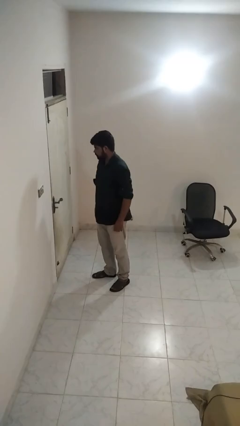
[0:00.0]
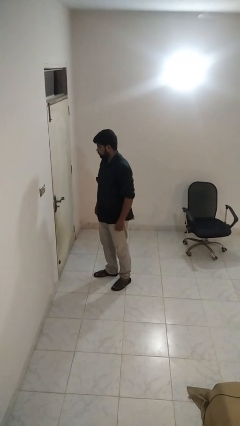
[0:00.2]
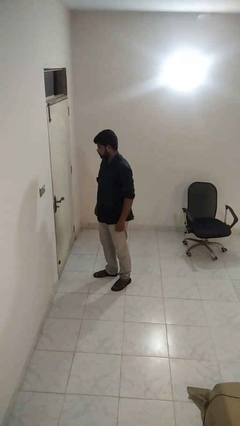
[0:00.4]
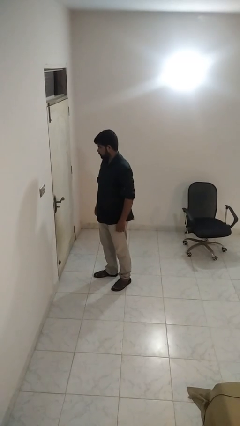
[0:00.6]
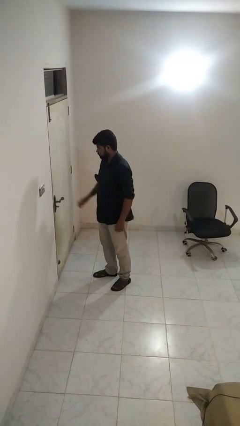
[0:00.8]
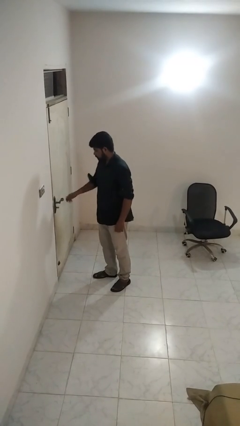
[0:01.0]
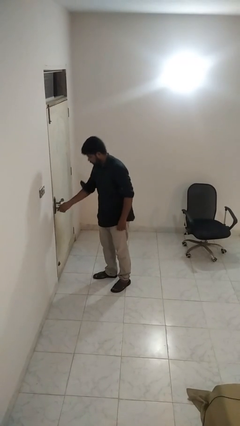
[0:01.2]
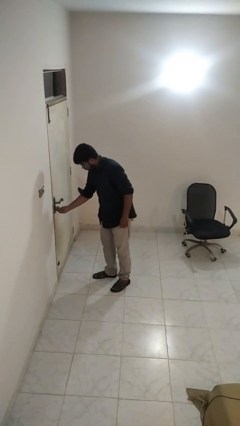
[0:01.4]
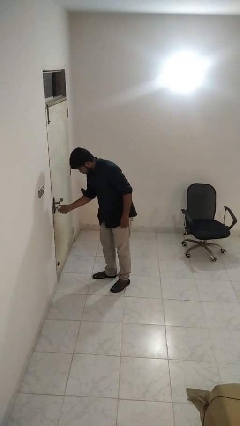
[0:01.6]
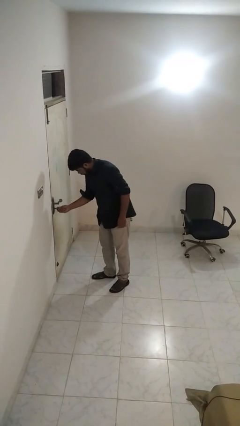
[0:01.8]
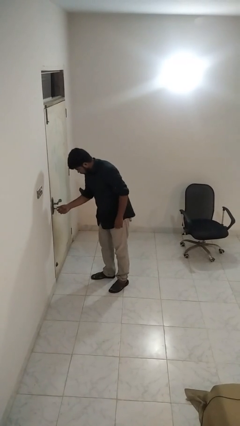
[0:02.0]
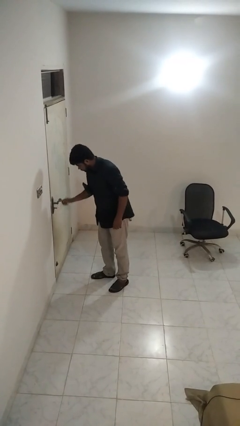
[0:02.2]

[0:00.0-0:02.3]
person unlocks door with keys

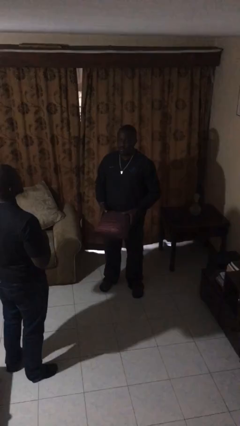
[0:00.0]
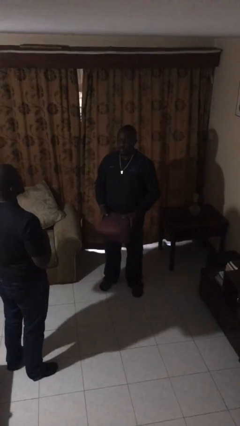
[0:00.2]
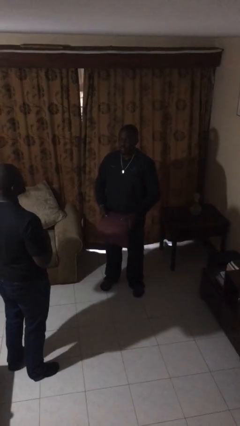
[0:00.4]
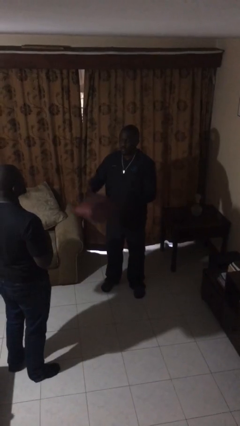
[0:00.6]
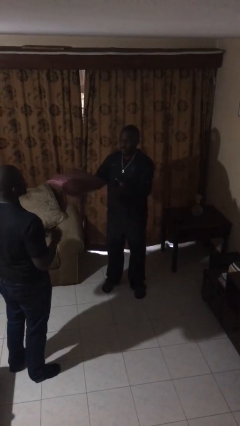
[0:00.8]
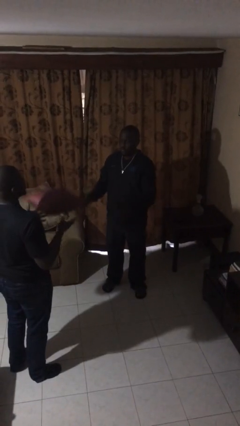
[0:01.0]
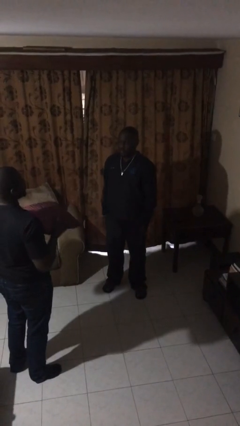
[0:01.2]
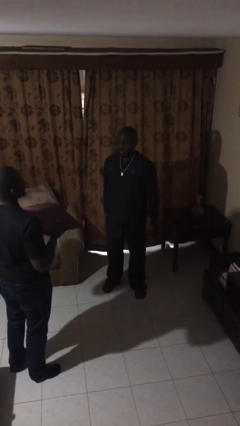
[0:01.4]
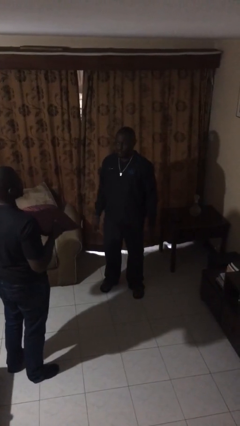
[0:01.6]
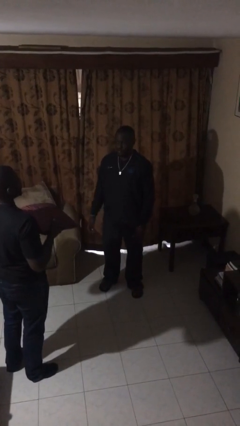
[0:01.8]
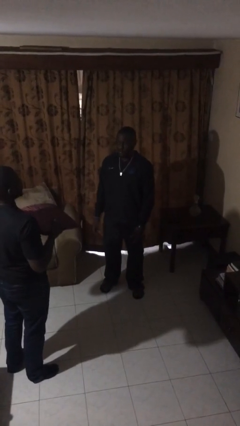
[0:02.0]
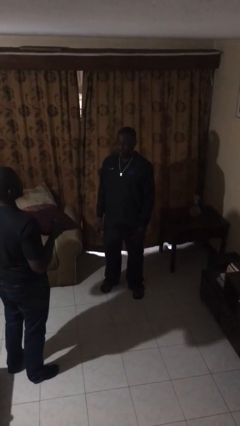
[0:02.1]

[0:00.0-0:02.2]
person throws object to person

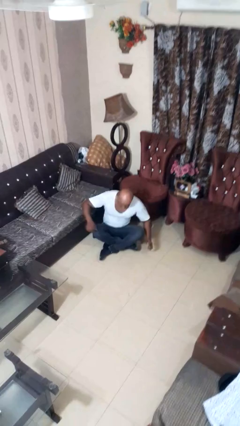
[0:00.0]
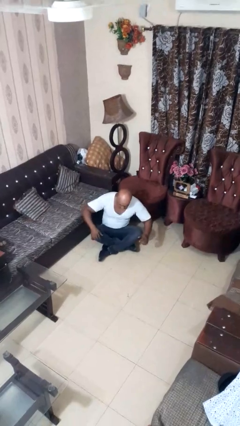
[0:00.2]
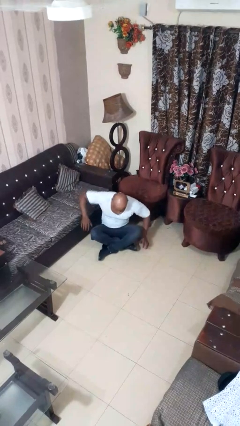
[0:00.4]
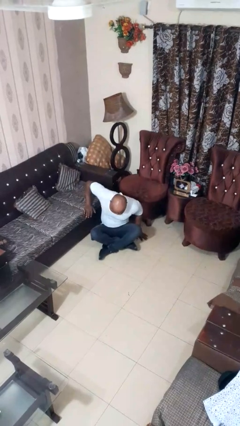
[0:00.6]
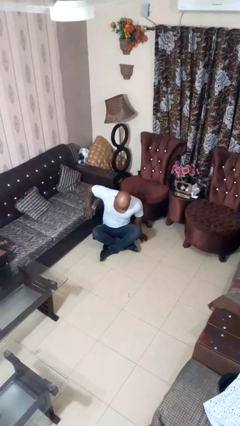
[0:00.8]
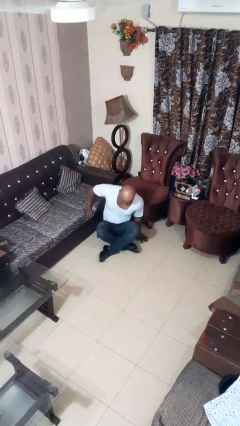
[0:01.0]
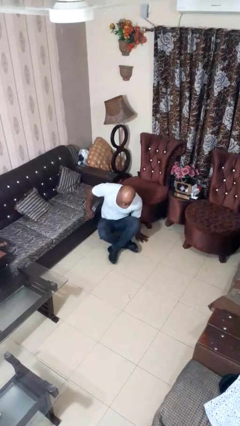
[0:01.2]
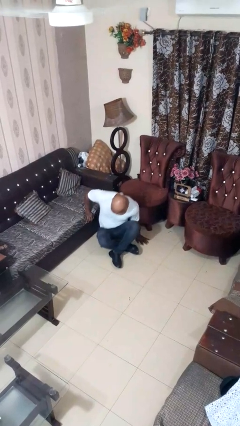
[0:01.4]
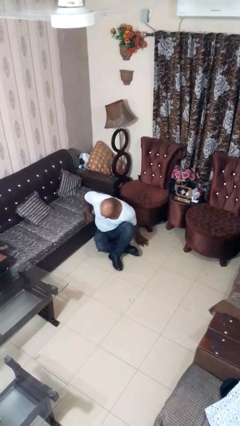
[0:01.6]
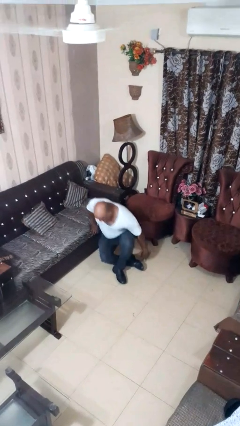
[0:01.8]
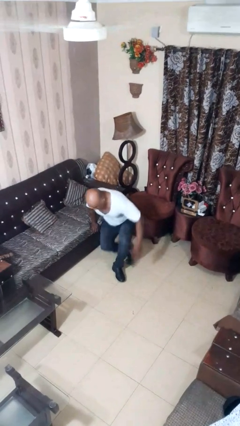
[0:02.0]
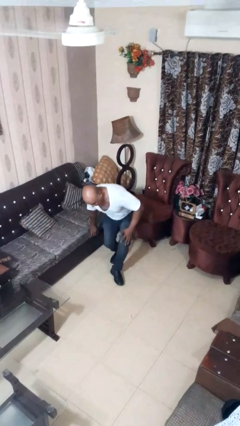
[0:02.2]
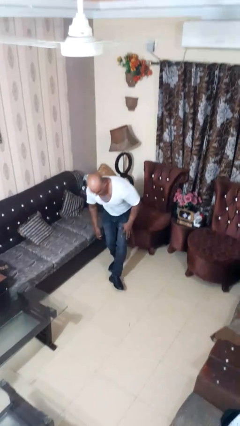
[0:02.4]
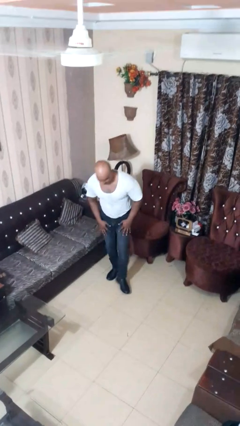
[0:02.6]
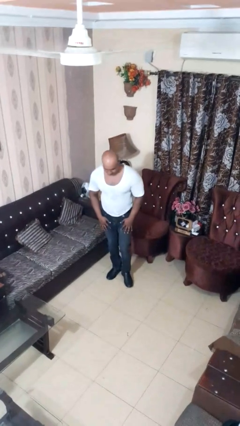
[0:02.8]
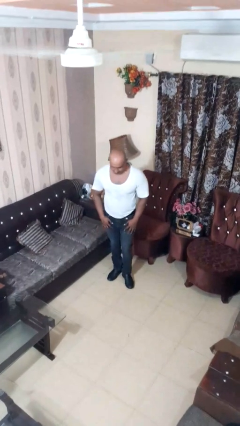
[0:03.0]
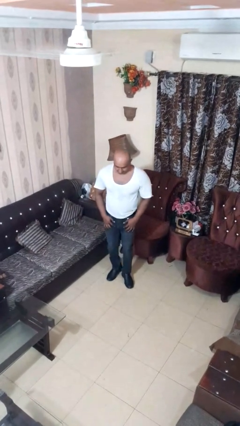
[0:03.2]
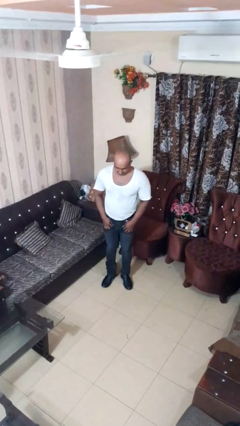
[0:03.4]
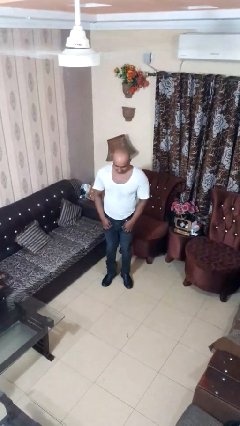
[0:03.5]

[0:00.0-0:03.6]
person stands up from floor

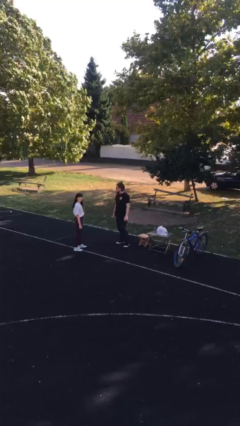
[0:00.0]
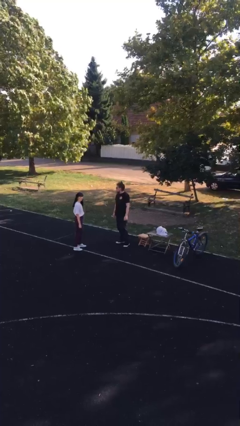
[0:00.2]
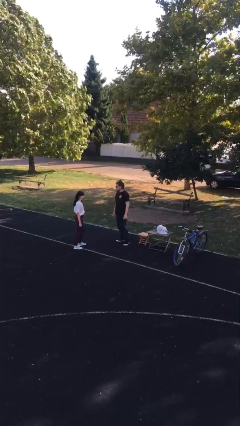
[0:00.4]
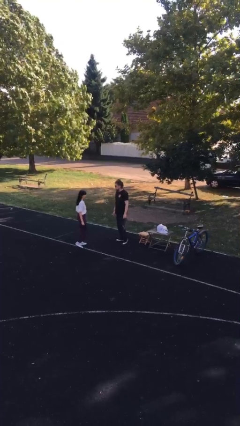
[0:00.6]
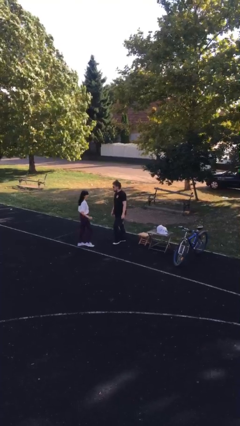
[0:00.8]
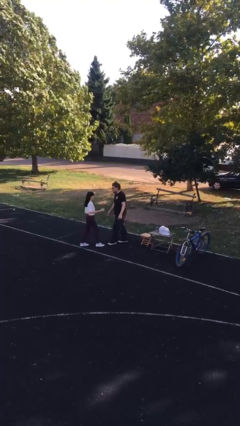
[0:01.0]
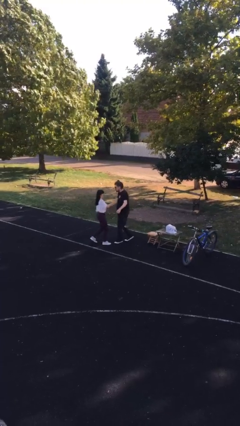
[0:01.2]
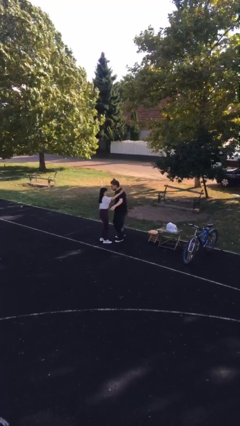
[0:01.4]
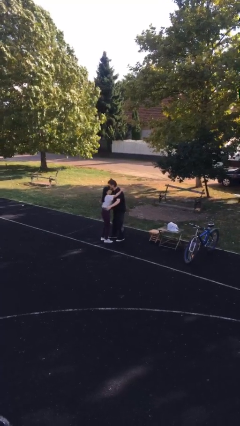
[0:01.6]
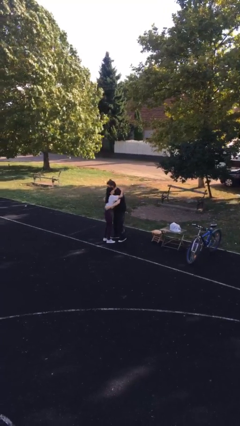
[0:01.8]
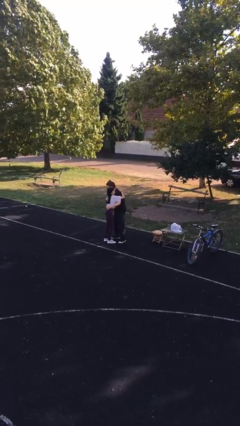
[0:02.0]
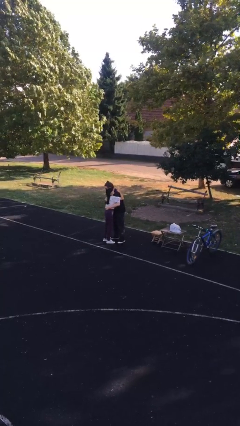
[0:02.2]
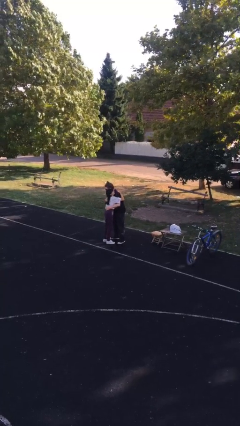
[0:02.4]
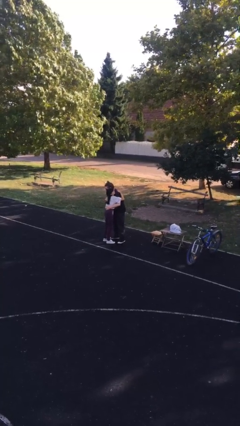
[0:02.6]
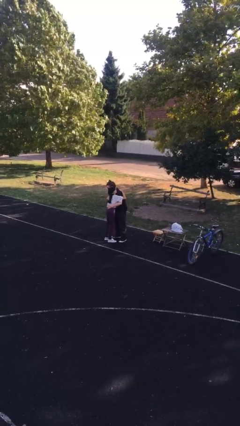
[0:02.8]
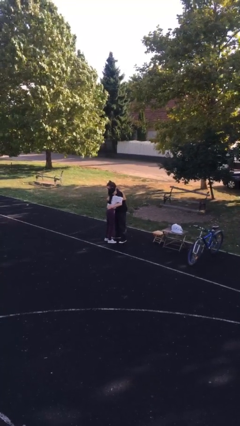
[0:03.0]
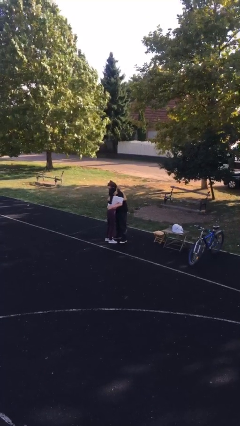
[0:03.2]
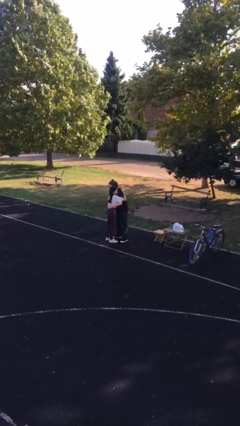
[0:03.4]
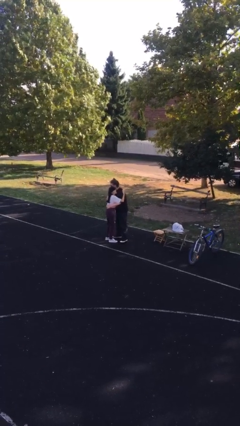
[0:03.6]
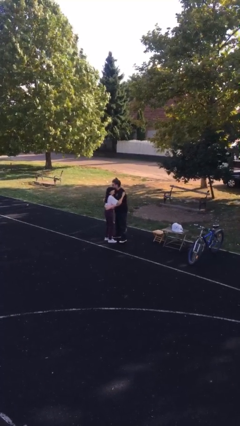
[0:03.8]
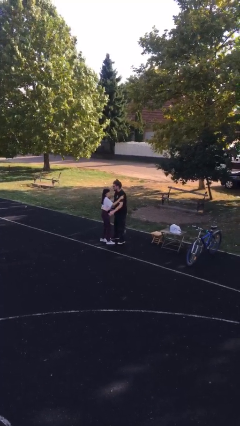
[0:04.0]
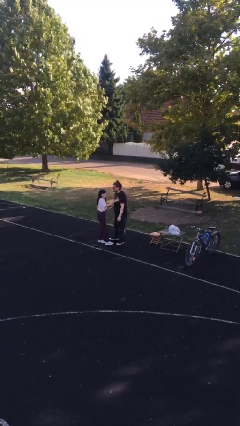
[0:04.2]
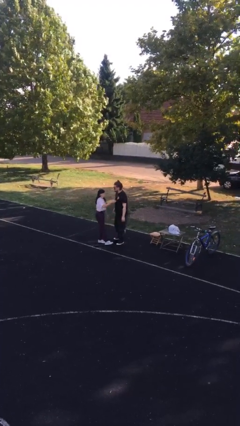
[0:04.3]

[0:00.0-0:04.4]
person embraces person

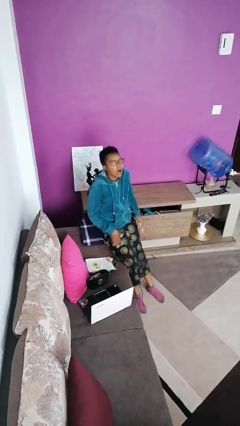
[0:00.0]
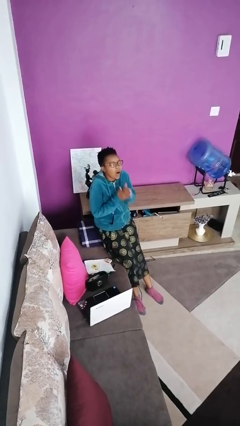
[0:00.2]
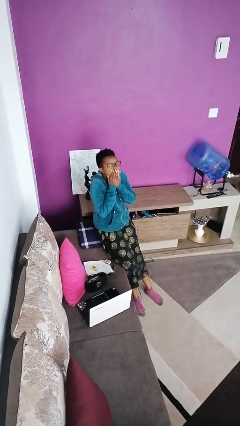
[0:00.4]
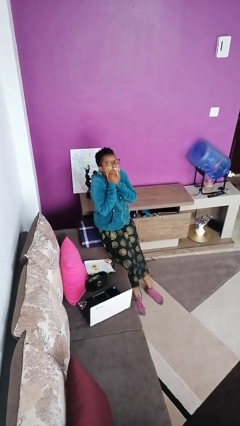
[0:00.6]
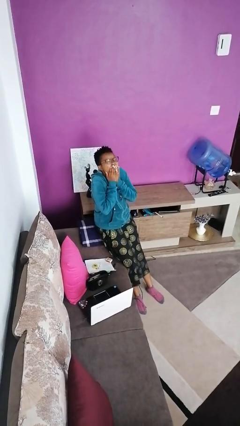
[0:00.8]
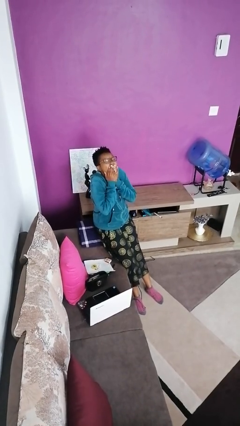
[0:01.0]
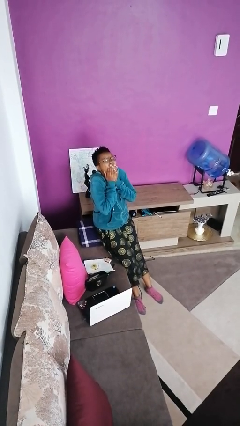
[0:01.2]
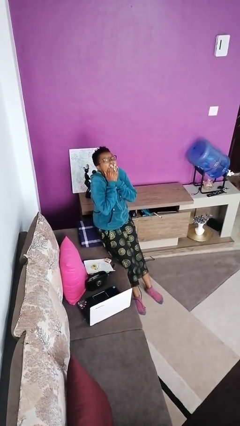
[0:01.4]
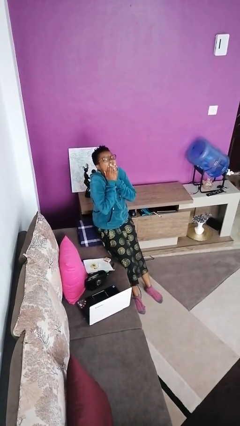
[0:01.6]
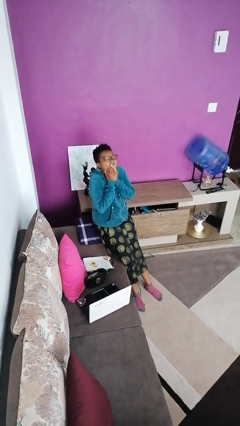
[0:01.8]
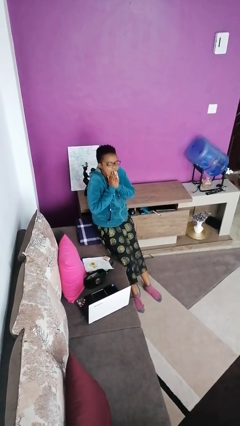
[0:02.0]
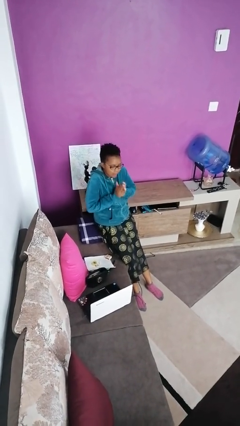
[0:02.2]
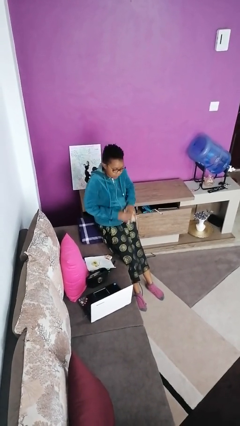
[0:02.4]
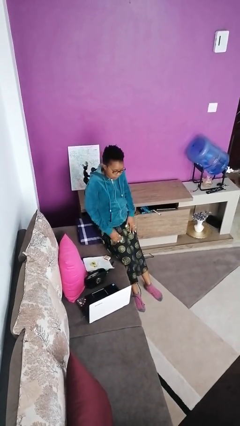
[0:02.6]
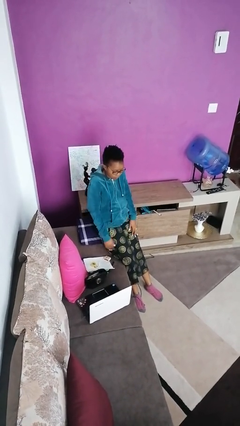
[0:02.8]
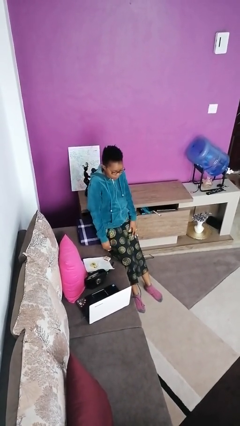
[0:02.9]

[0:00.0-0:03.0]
person opens cabinet

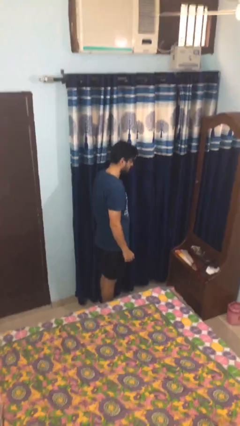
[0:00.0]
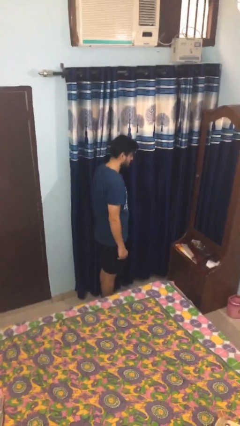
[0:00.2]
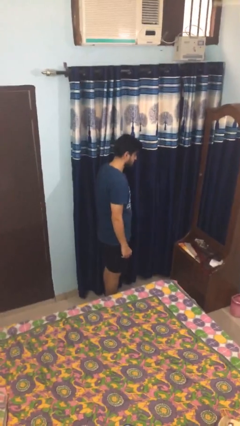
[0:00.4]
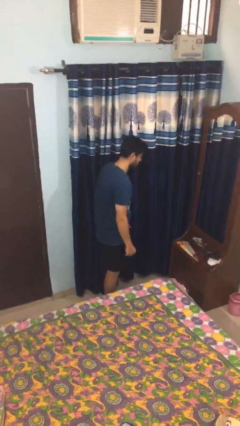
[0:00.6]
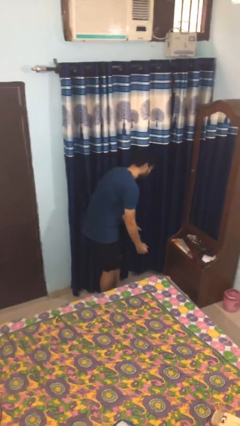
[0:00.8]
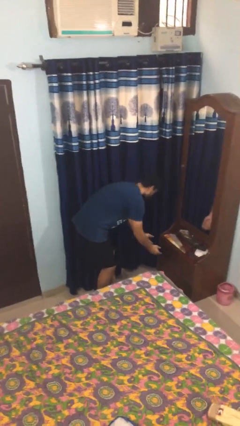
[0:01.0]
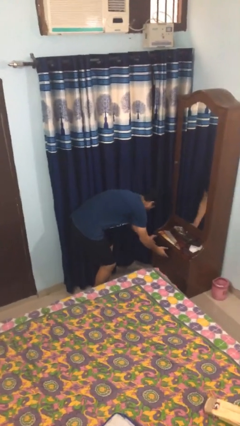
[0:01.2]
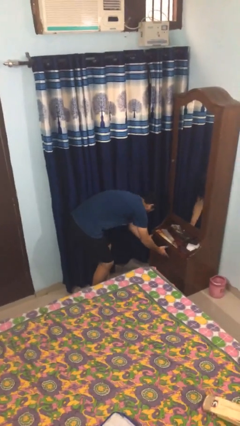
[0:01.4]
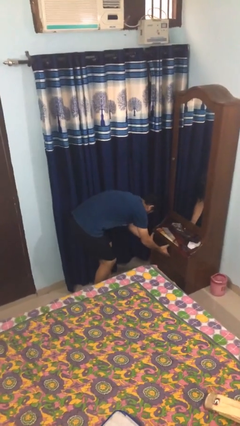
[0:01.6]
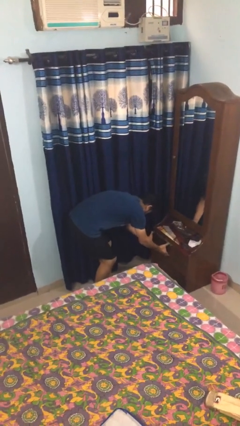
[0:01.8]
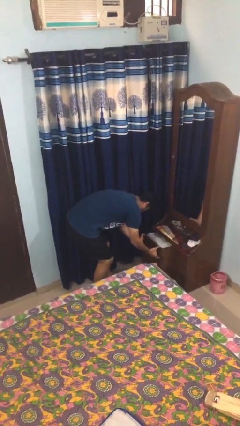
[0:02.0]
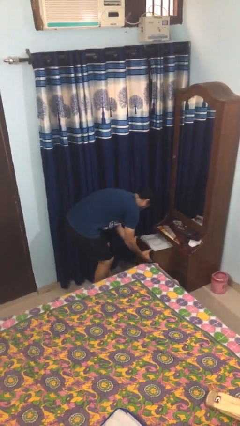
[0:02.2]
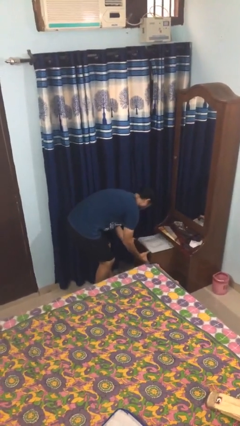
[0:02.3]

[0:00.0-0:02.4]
person opens dresser drawer
